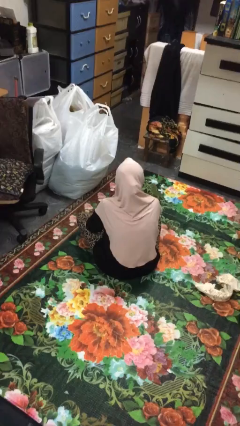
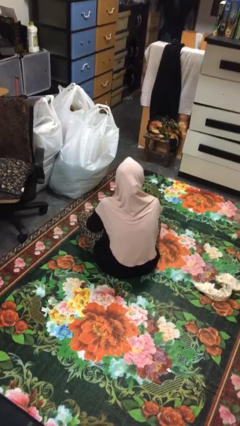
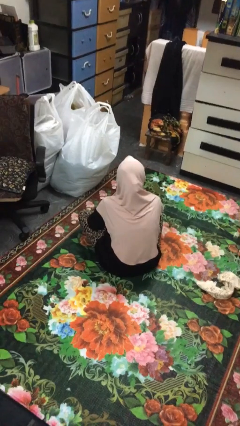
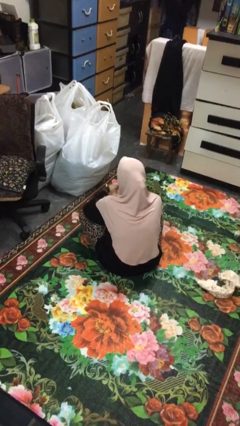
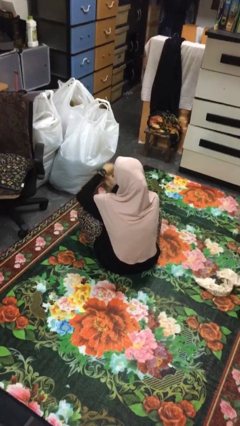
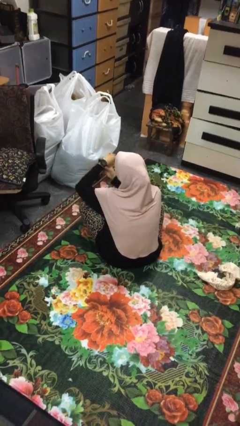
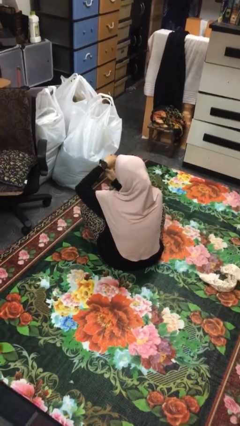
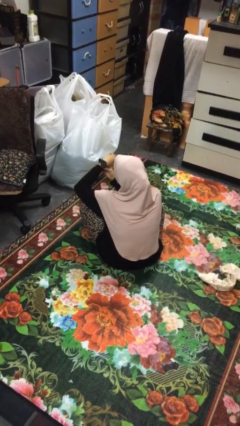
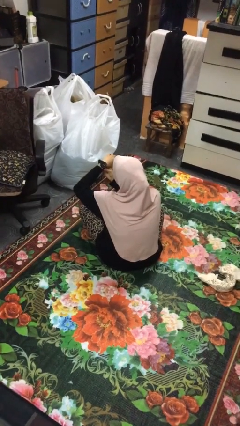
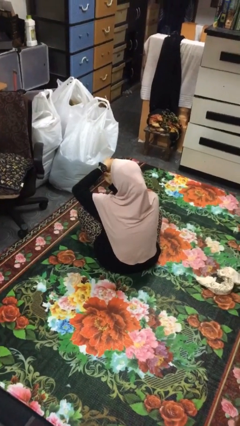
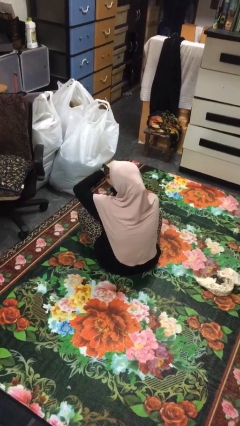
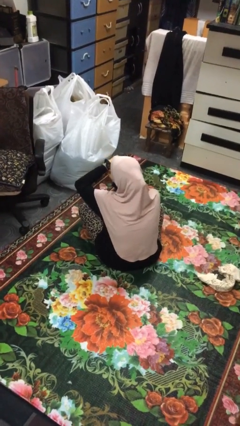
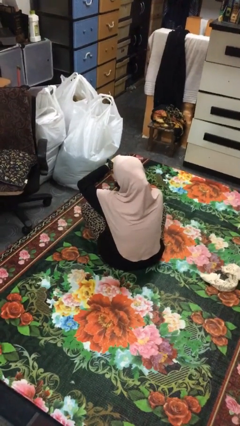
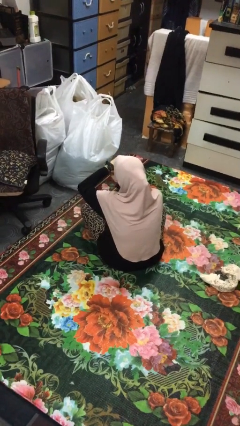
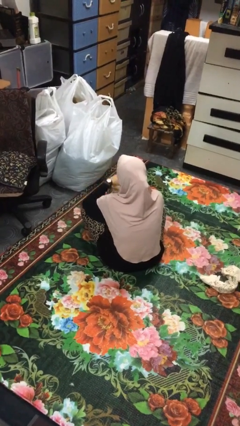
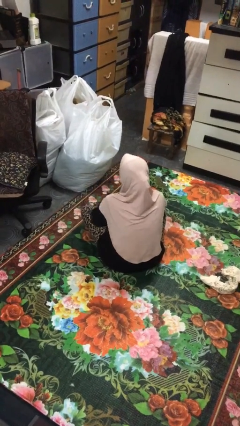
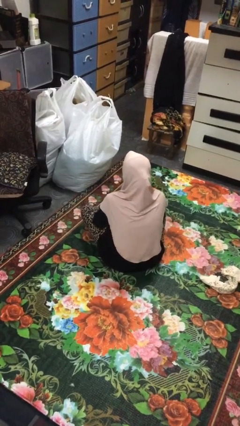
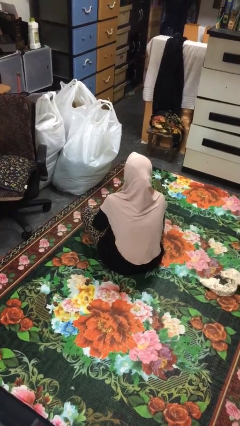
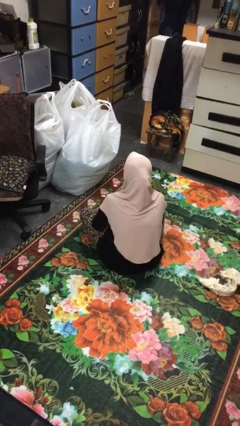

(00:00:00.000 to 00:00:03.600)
person looks at wristwatch

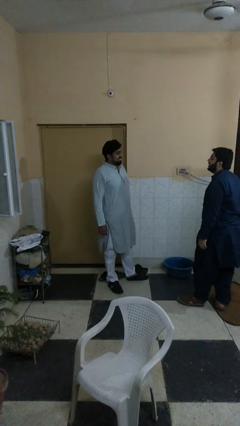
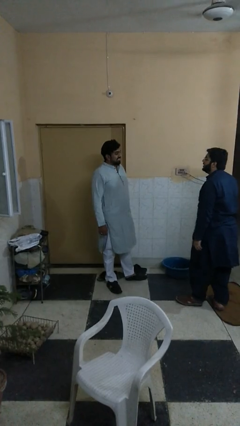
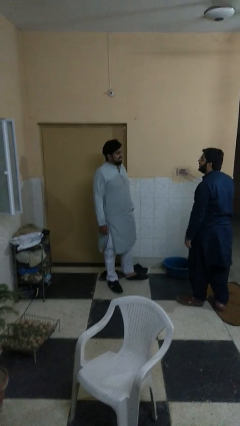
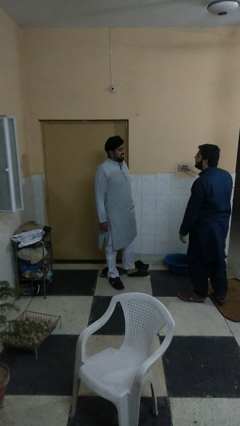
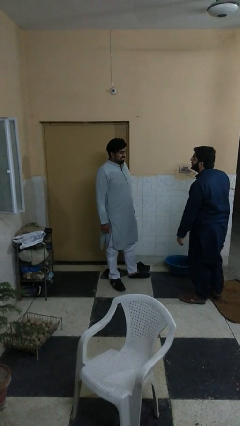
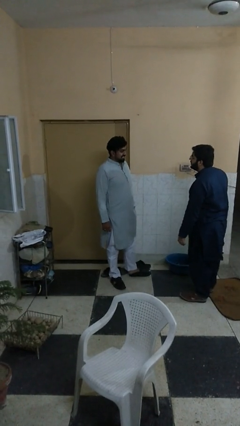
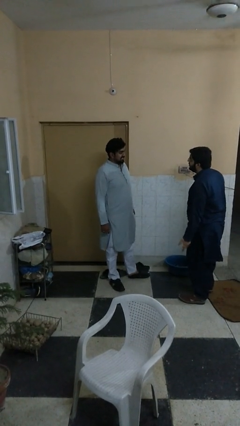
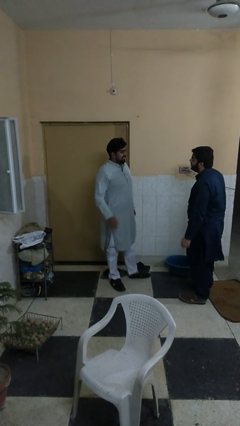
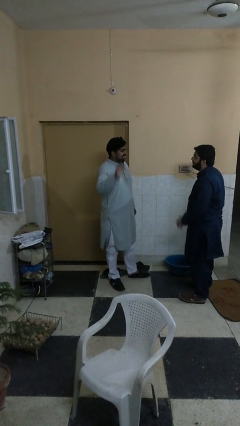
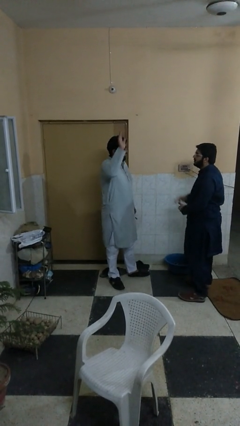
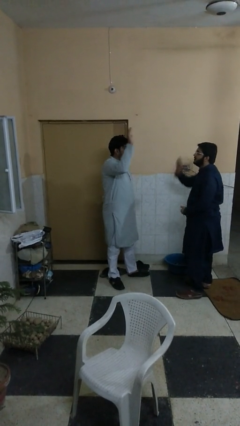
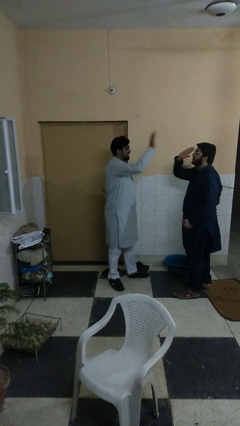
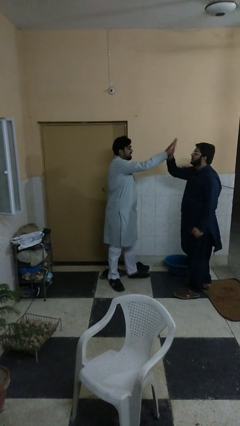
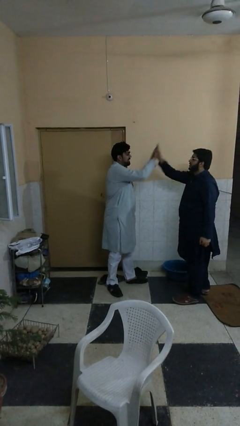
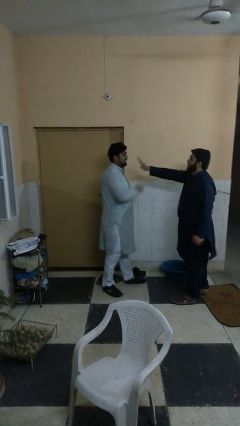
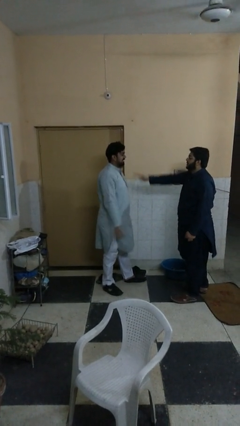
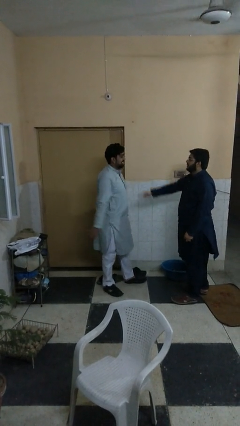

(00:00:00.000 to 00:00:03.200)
person highfives hand

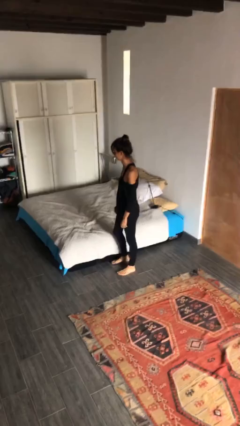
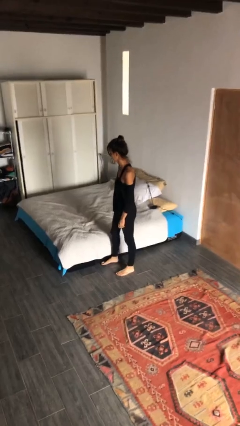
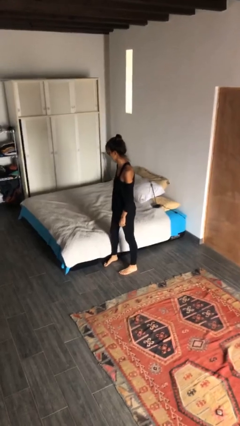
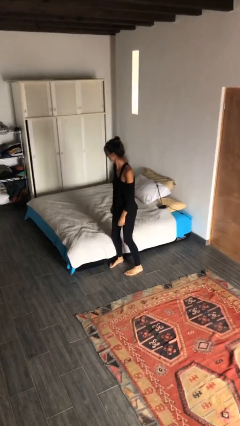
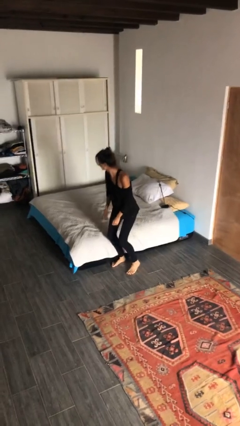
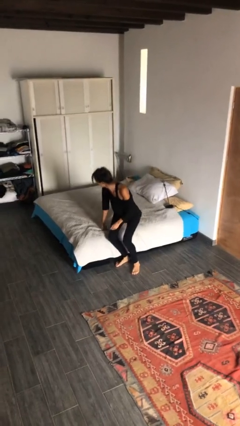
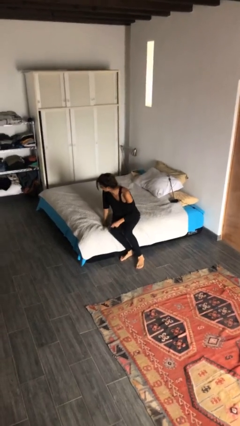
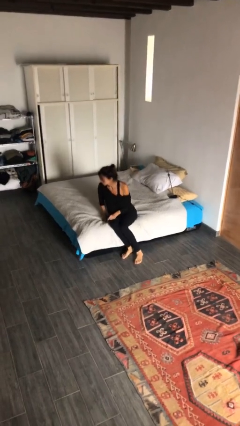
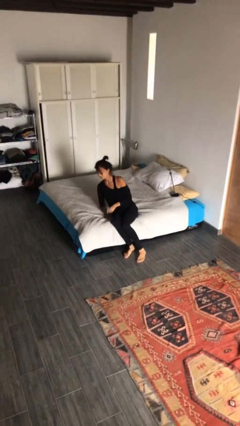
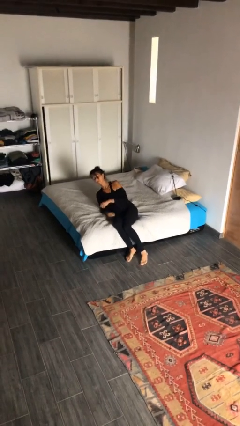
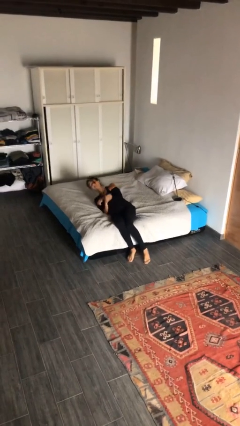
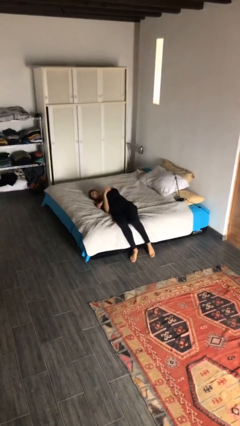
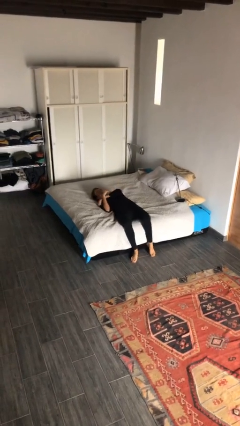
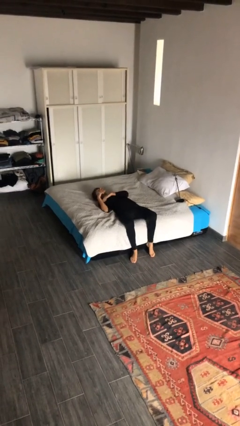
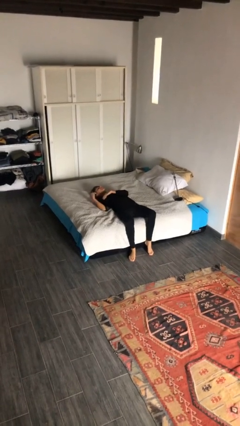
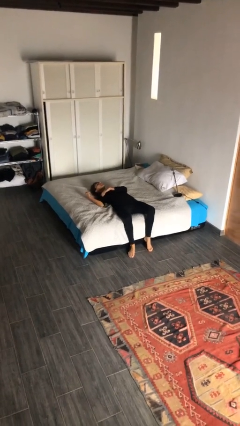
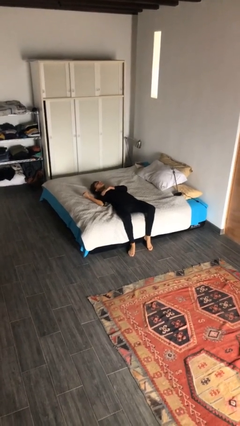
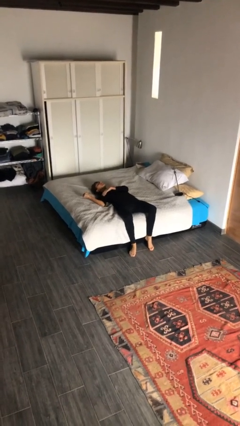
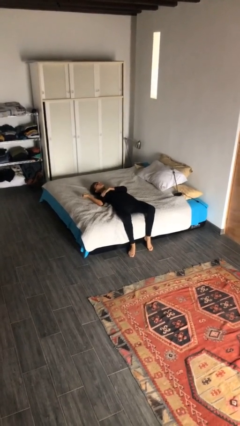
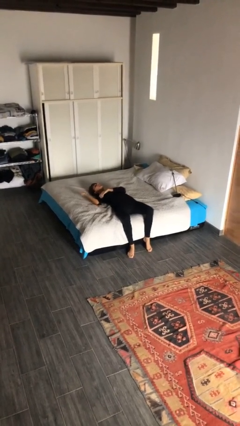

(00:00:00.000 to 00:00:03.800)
person lies down on bed

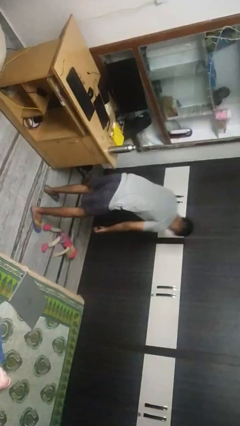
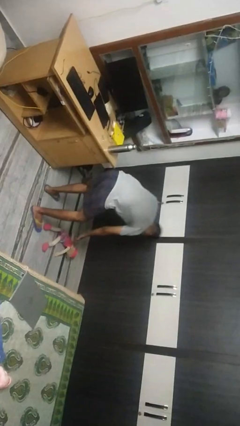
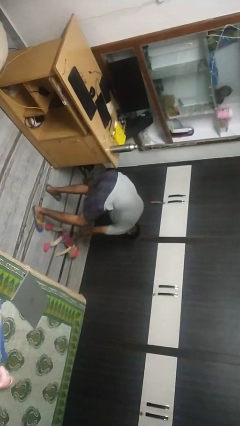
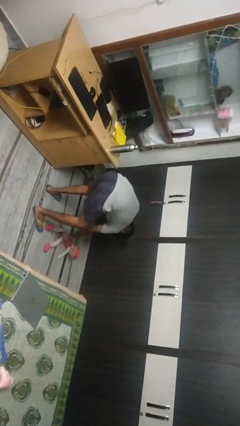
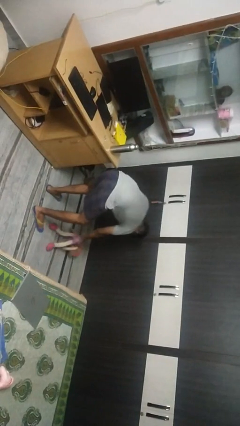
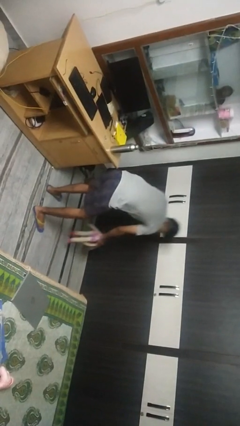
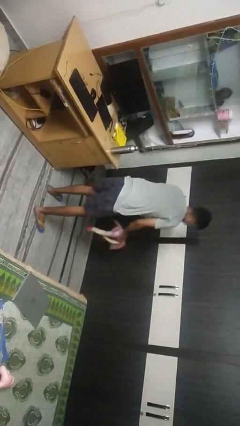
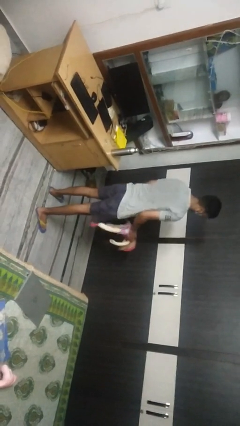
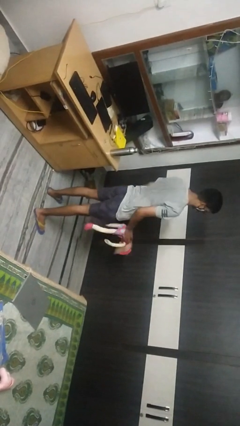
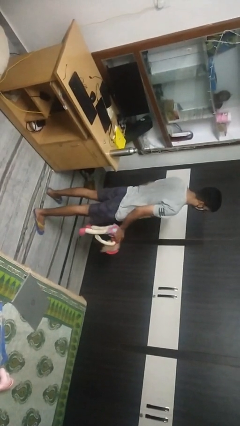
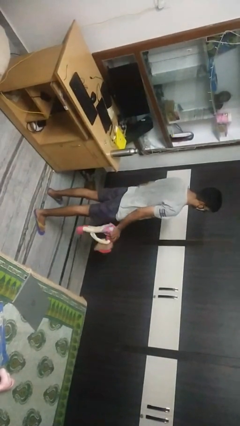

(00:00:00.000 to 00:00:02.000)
person picks up object from floor

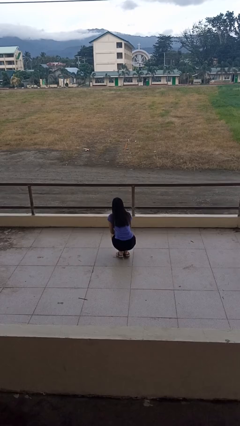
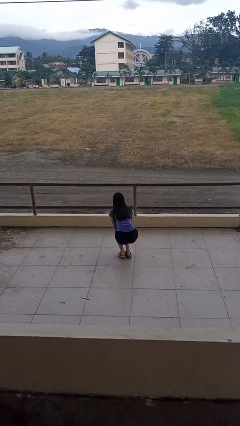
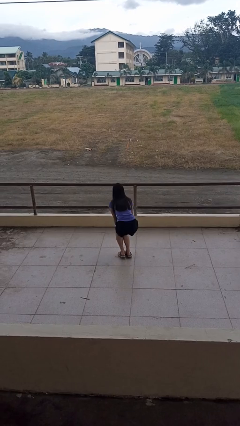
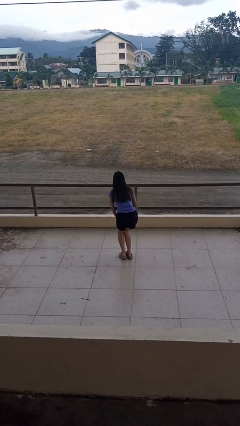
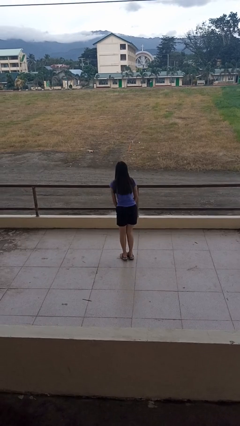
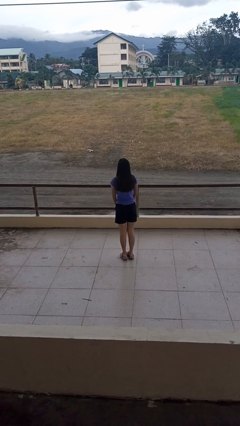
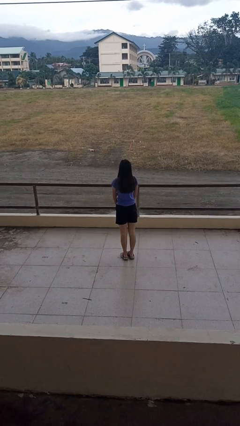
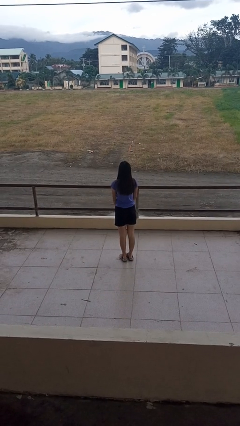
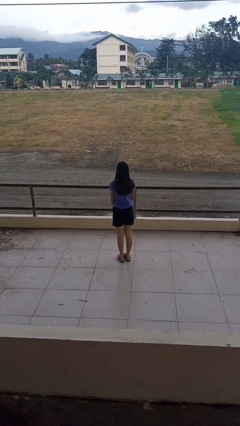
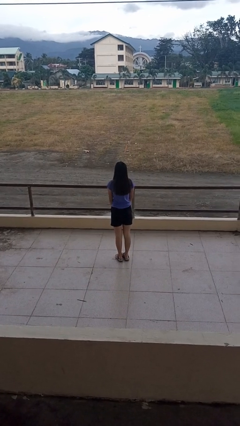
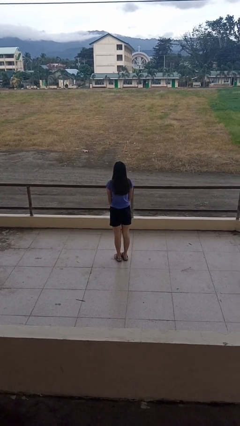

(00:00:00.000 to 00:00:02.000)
person stands up

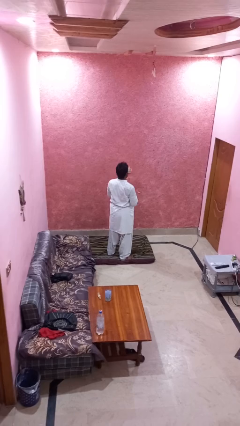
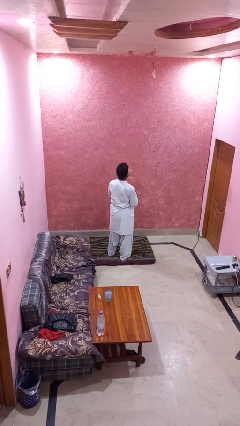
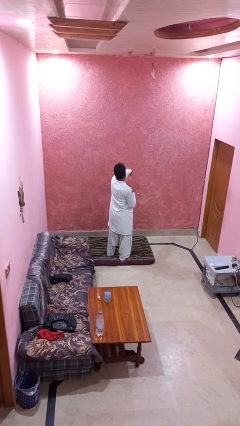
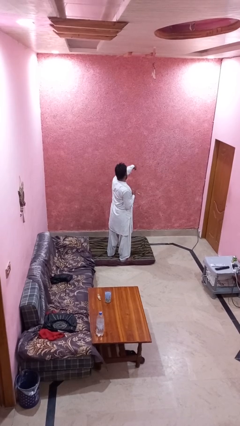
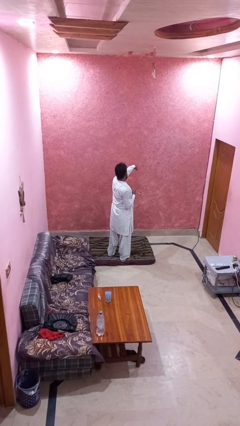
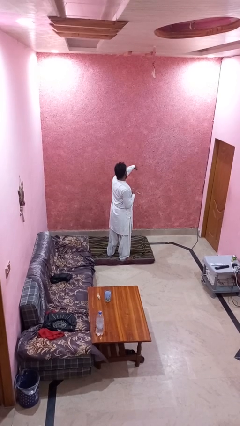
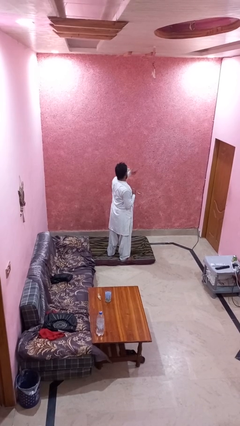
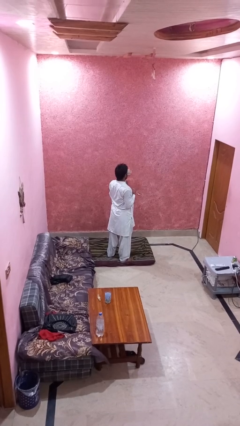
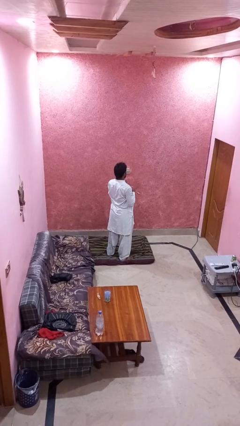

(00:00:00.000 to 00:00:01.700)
person punches

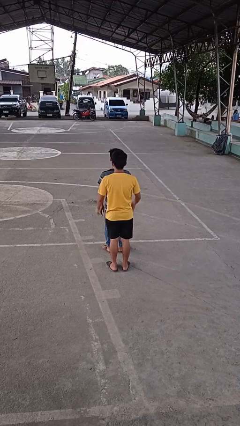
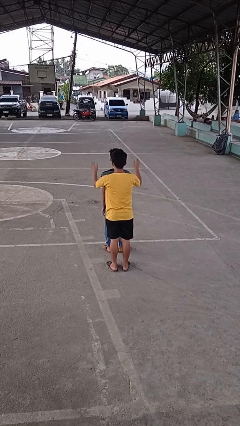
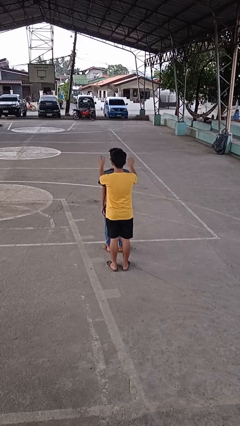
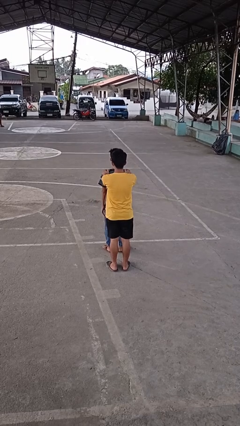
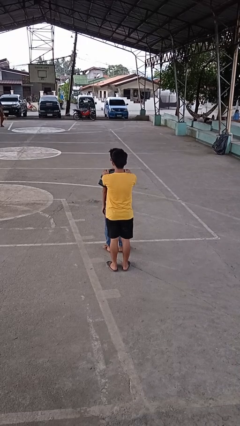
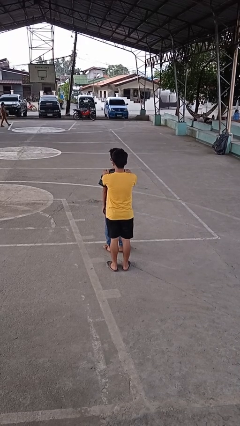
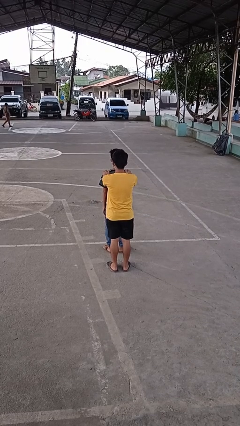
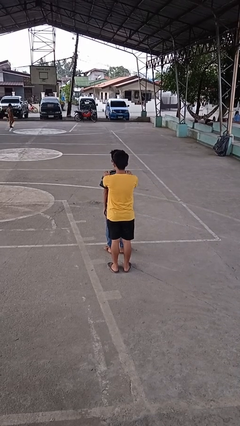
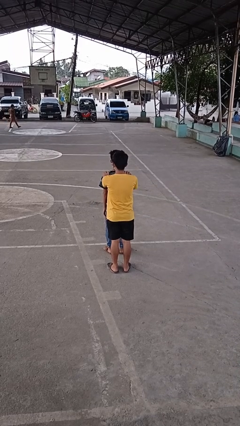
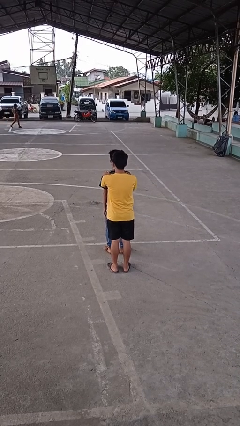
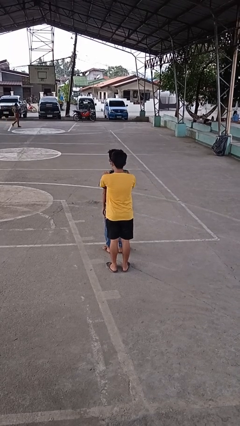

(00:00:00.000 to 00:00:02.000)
person grabs person by shoulder
